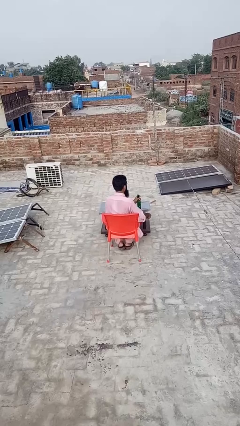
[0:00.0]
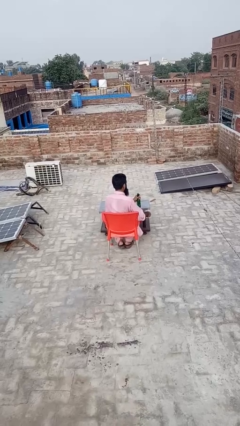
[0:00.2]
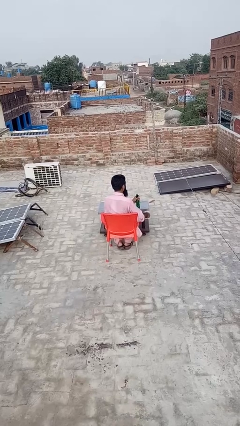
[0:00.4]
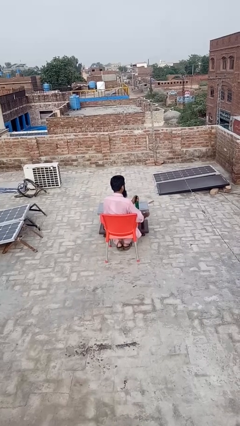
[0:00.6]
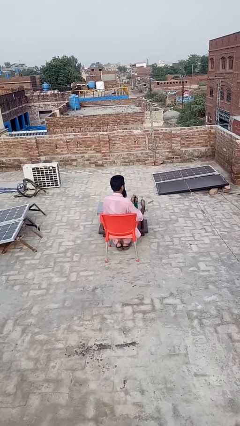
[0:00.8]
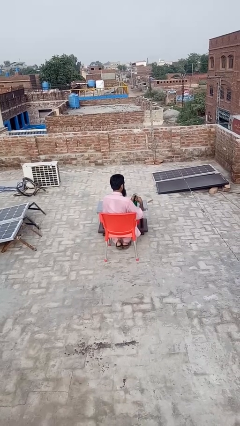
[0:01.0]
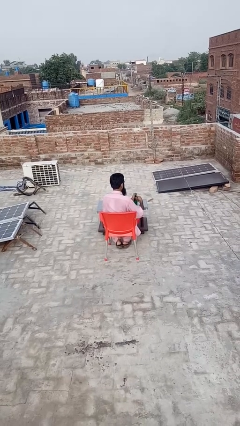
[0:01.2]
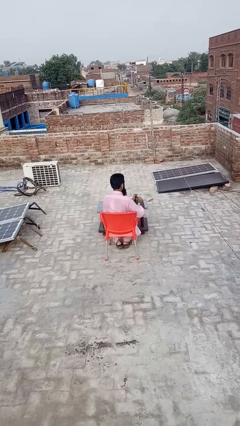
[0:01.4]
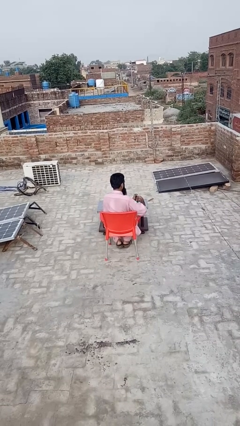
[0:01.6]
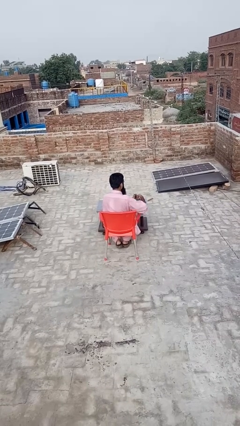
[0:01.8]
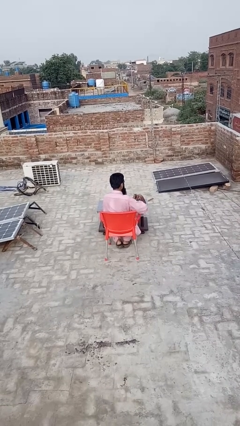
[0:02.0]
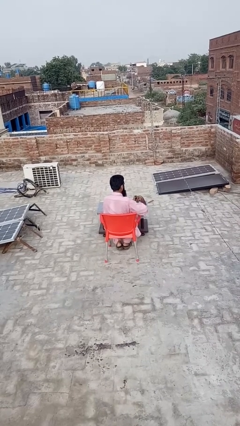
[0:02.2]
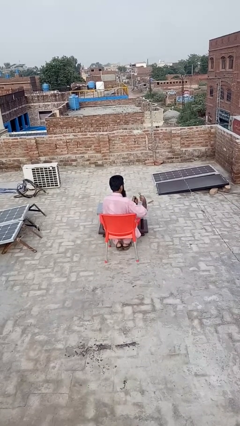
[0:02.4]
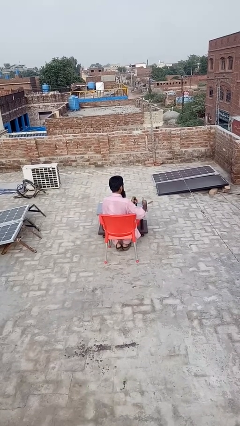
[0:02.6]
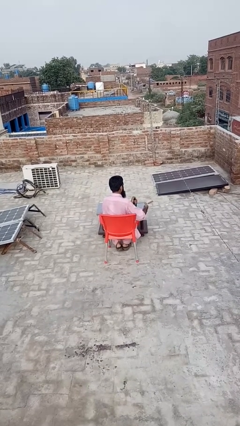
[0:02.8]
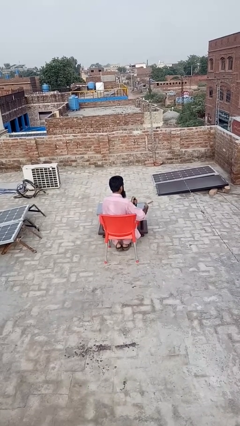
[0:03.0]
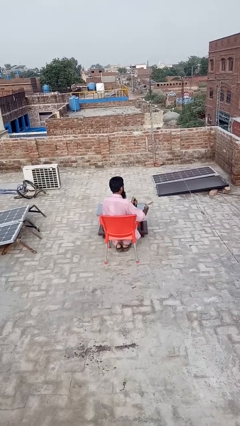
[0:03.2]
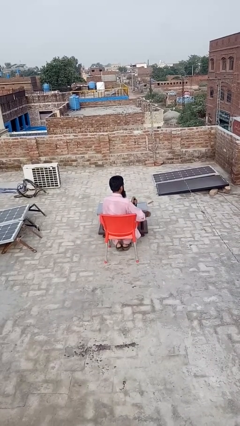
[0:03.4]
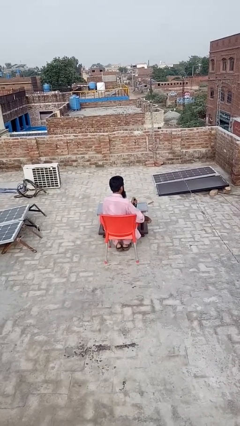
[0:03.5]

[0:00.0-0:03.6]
person opens can with can opener

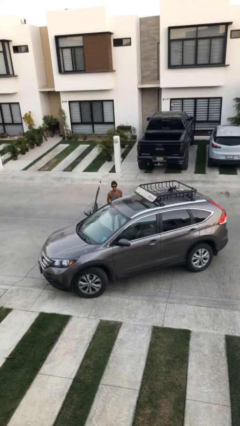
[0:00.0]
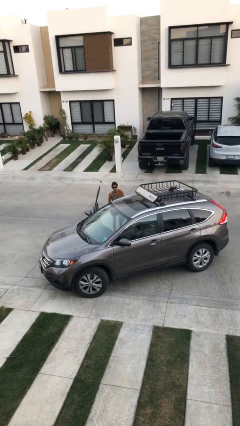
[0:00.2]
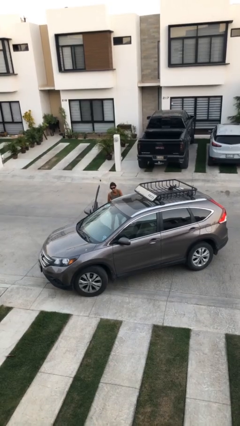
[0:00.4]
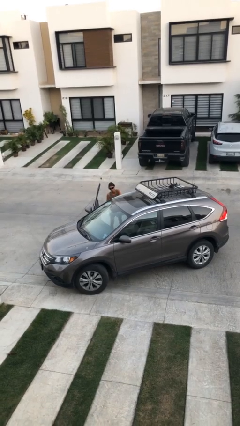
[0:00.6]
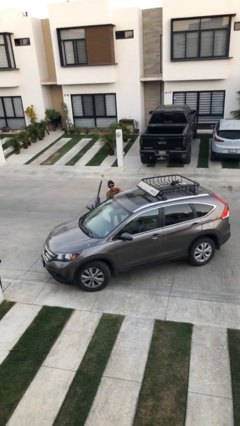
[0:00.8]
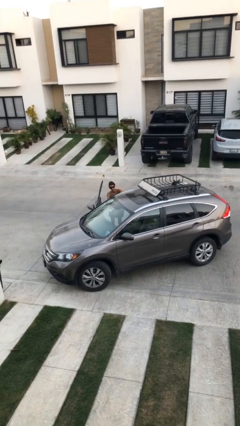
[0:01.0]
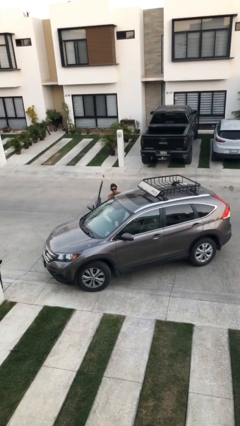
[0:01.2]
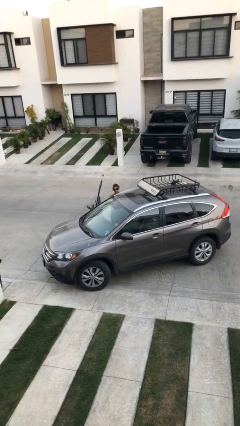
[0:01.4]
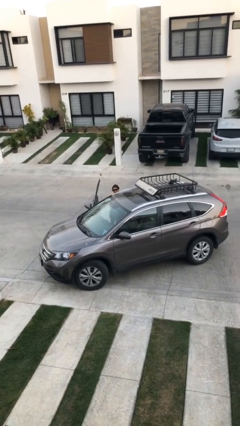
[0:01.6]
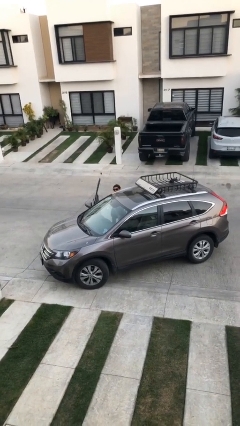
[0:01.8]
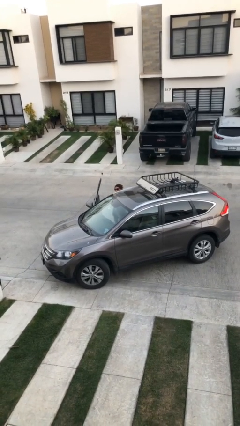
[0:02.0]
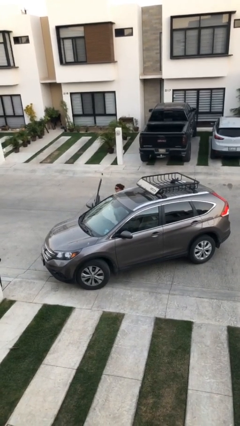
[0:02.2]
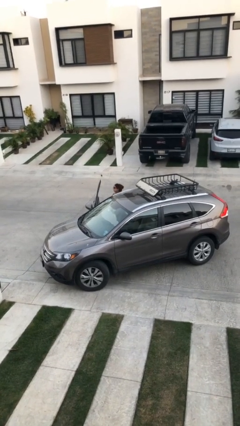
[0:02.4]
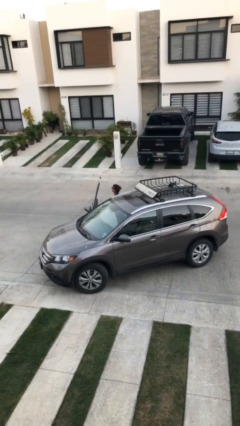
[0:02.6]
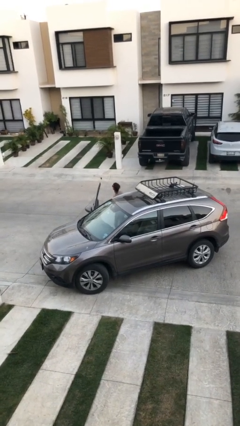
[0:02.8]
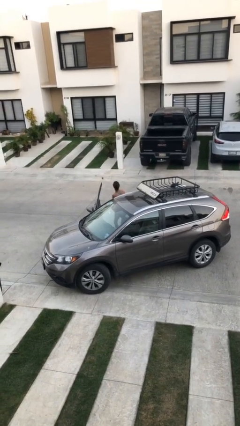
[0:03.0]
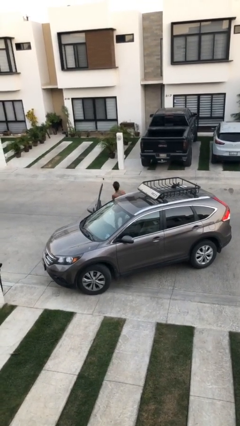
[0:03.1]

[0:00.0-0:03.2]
person loads car

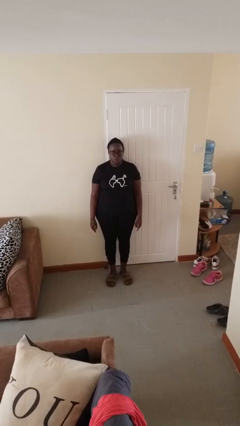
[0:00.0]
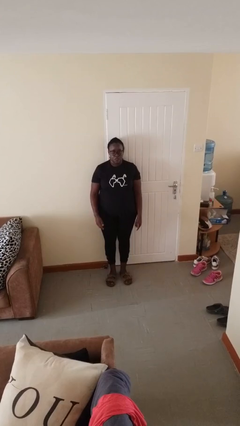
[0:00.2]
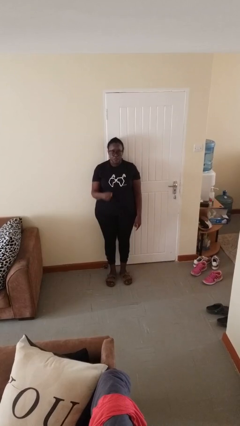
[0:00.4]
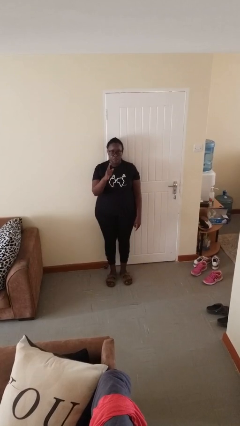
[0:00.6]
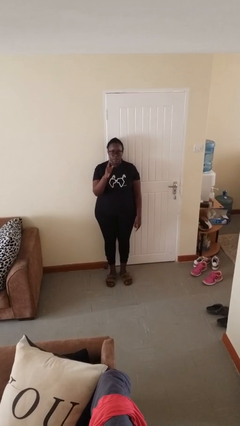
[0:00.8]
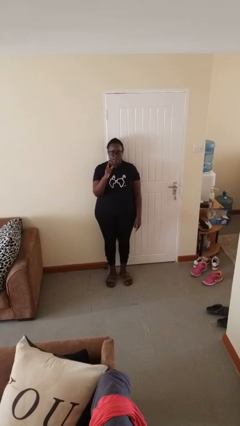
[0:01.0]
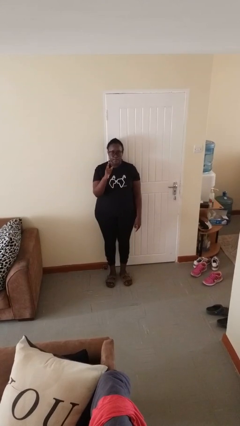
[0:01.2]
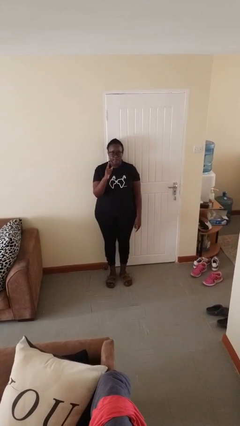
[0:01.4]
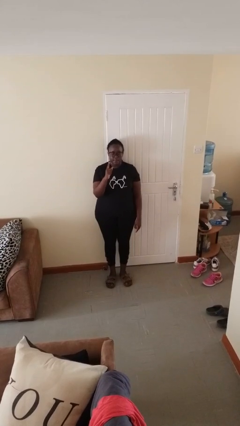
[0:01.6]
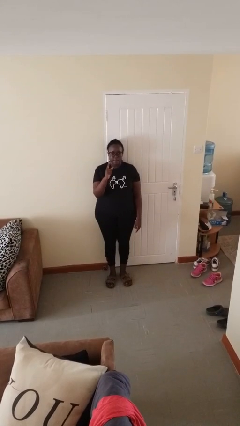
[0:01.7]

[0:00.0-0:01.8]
person gestures number one

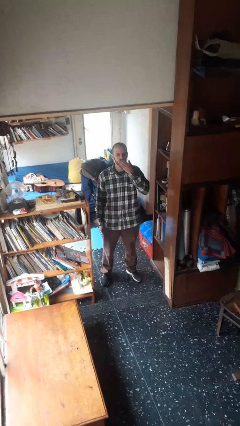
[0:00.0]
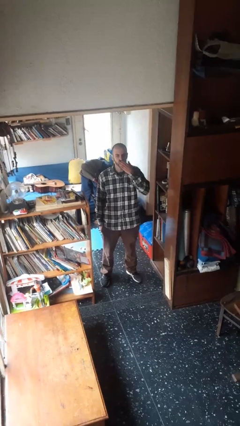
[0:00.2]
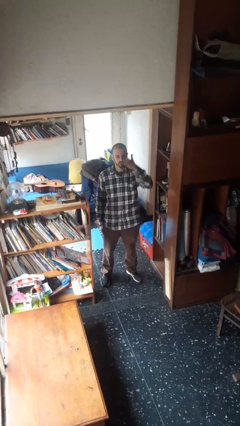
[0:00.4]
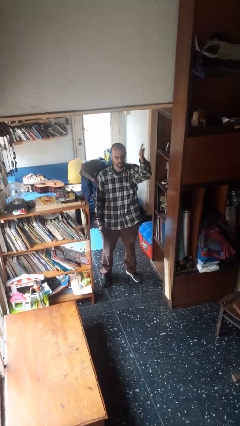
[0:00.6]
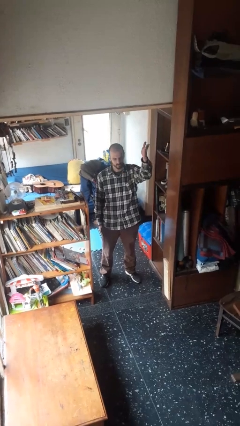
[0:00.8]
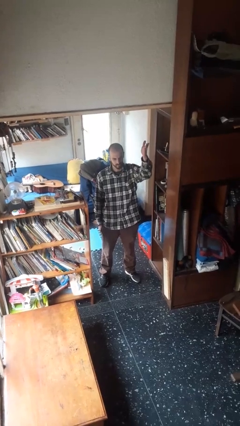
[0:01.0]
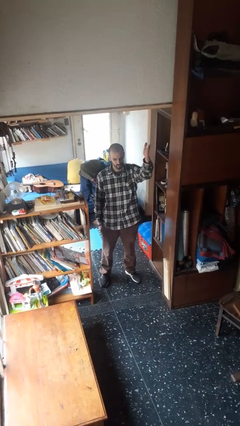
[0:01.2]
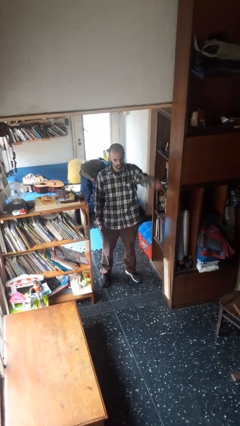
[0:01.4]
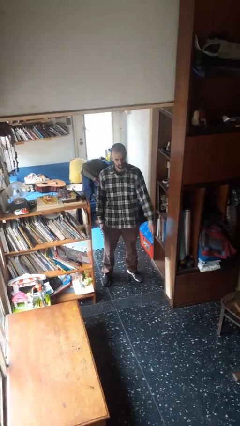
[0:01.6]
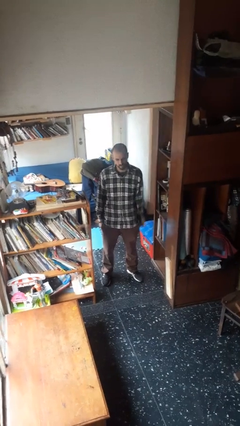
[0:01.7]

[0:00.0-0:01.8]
person gestures blow kiss

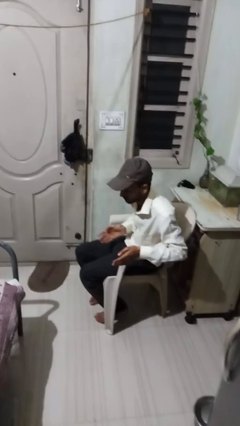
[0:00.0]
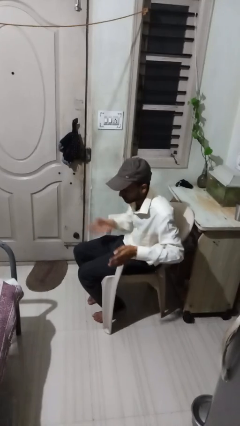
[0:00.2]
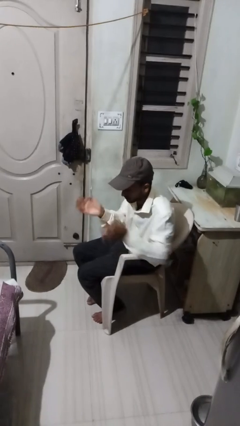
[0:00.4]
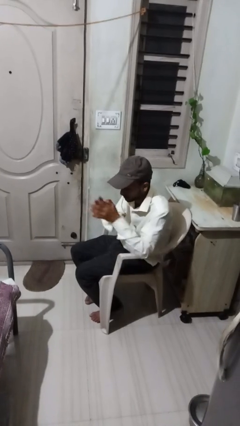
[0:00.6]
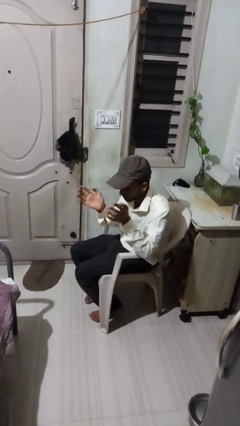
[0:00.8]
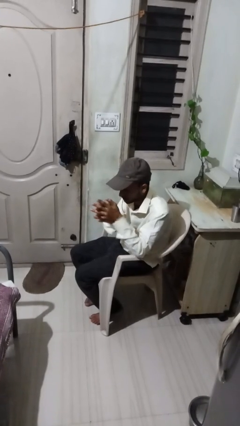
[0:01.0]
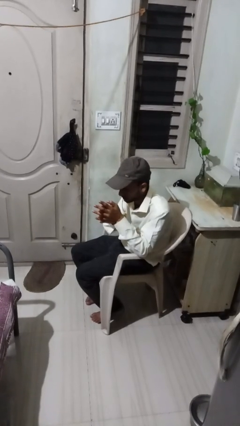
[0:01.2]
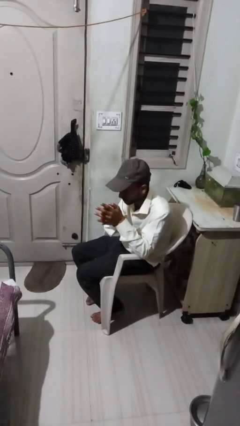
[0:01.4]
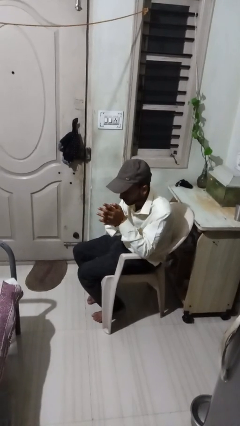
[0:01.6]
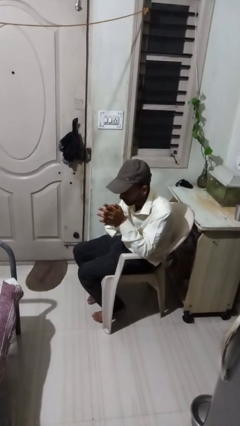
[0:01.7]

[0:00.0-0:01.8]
person claps hands

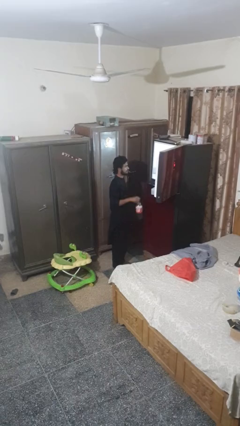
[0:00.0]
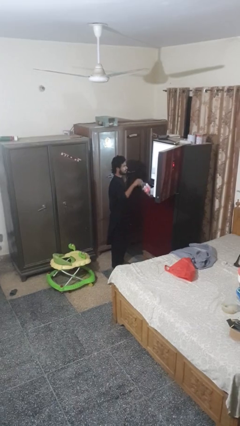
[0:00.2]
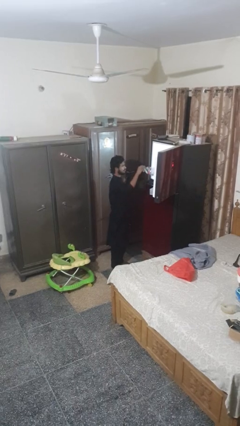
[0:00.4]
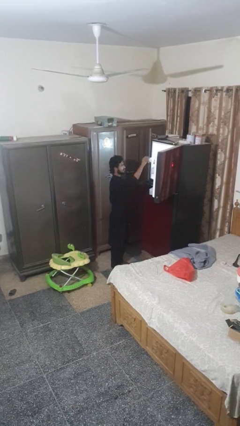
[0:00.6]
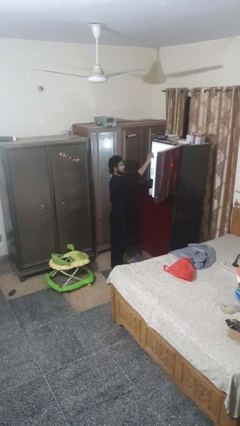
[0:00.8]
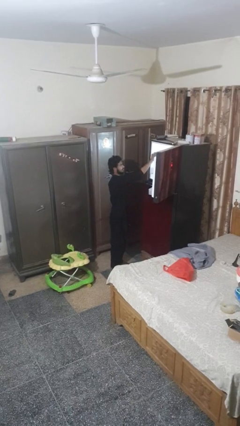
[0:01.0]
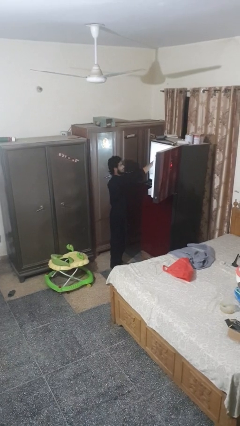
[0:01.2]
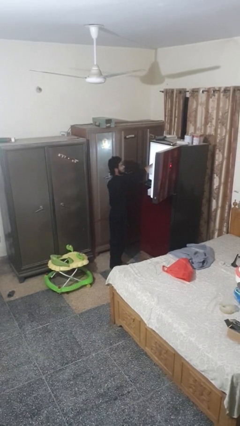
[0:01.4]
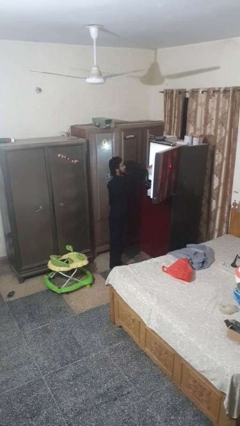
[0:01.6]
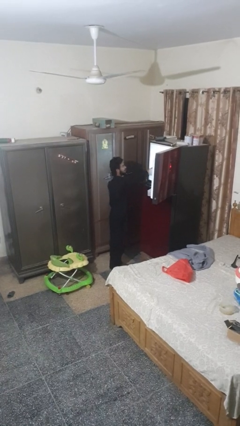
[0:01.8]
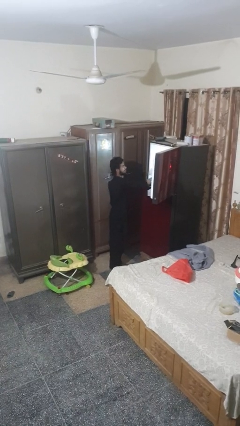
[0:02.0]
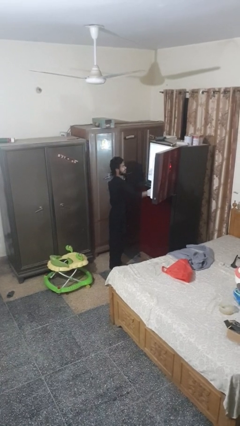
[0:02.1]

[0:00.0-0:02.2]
person puts object into refrigerator

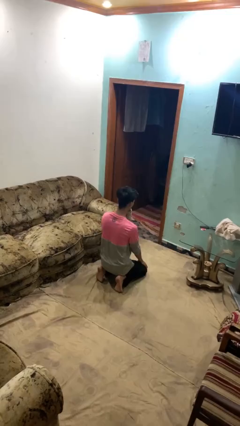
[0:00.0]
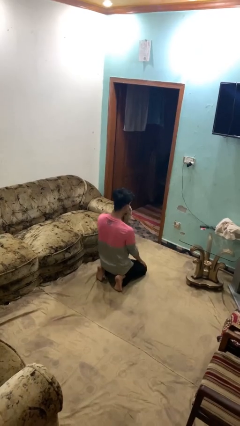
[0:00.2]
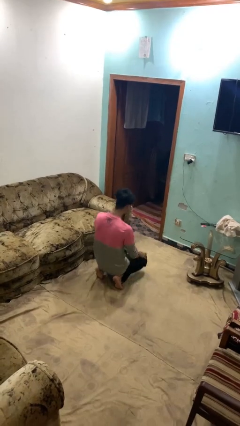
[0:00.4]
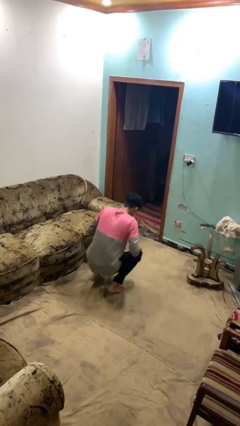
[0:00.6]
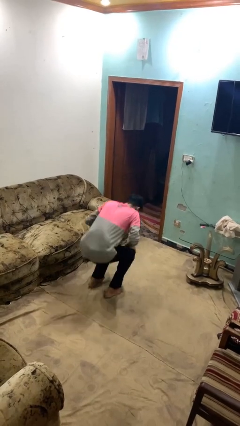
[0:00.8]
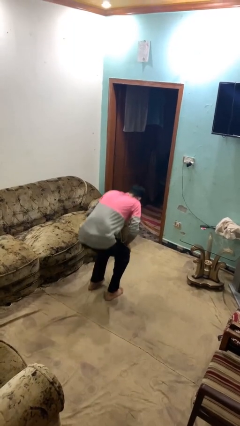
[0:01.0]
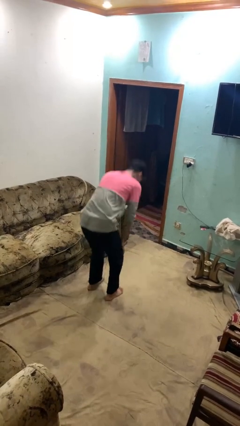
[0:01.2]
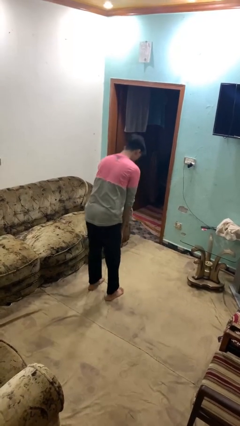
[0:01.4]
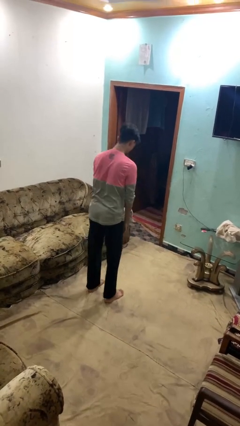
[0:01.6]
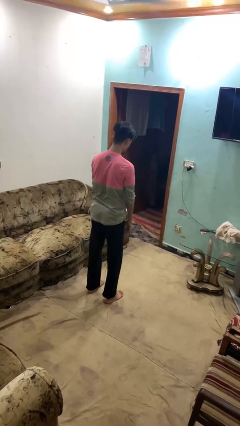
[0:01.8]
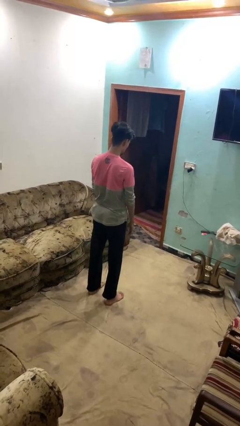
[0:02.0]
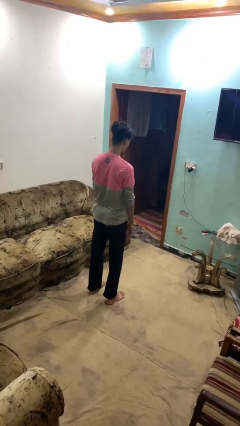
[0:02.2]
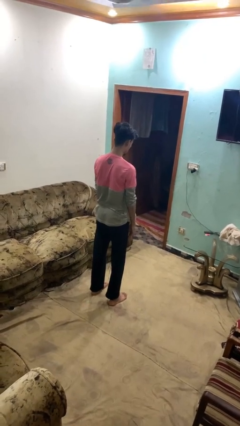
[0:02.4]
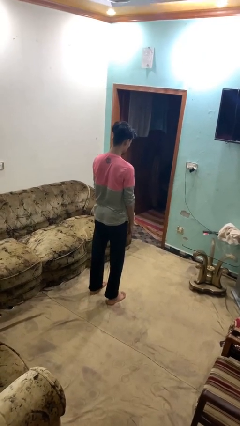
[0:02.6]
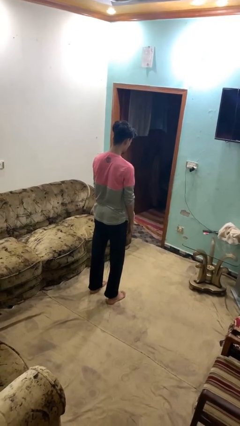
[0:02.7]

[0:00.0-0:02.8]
person stands up from floor
